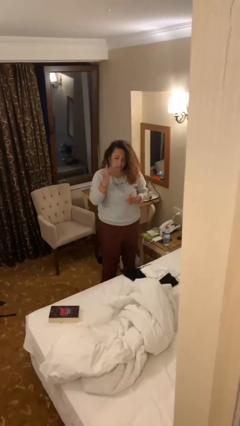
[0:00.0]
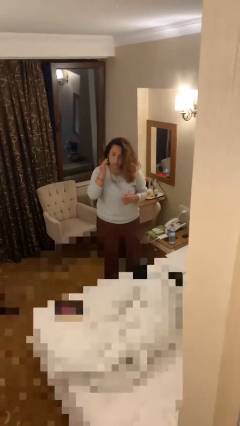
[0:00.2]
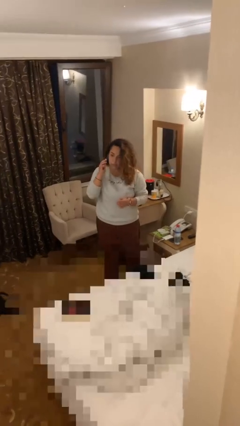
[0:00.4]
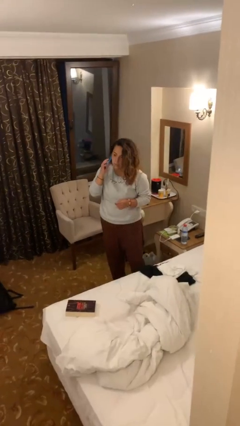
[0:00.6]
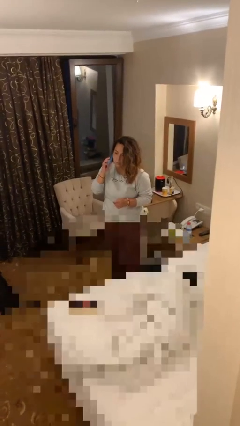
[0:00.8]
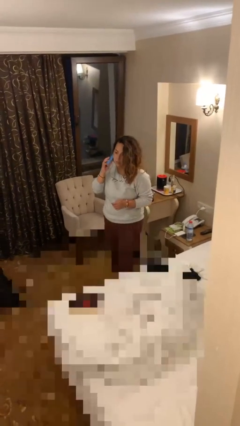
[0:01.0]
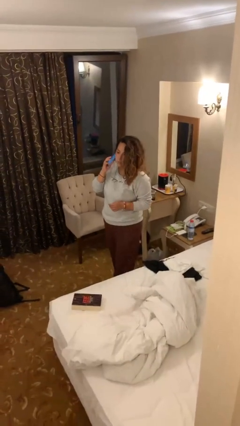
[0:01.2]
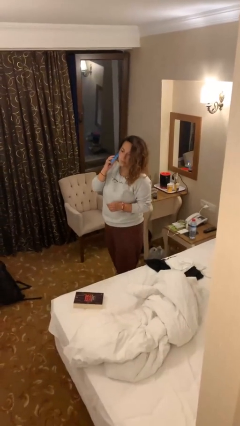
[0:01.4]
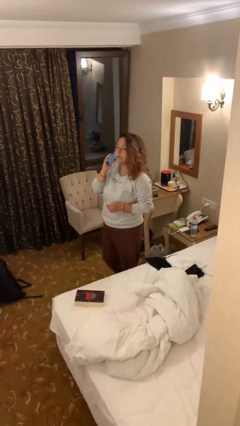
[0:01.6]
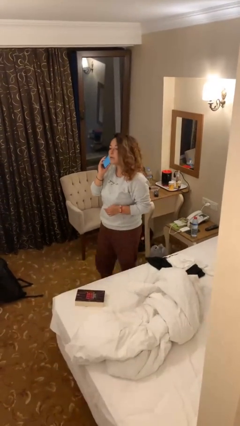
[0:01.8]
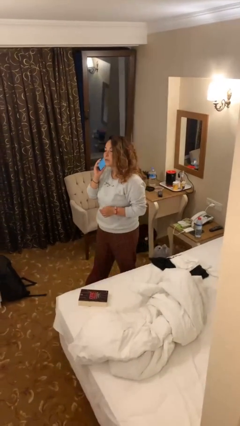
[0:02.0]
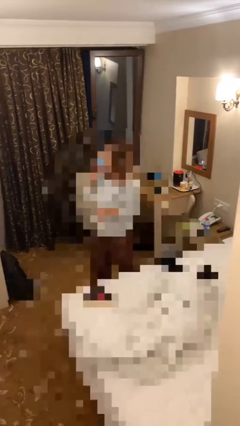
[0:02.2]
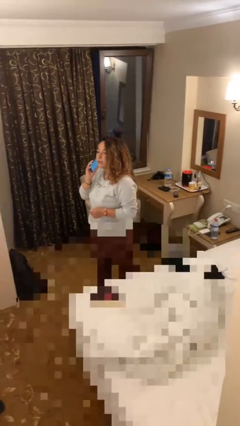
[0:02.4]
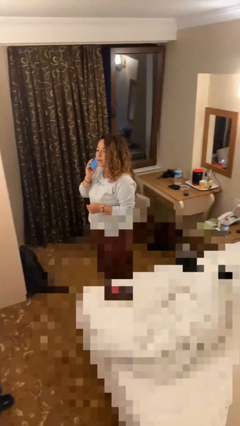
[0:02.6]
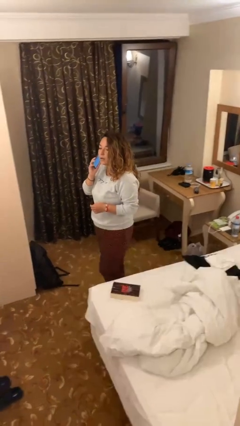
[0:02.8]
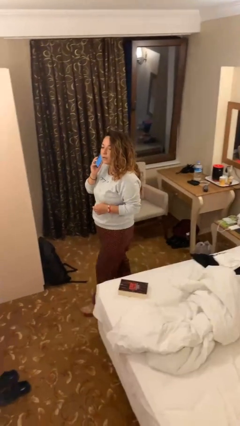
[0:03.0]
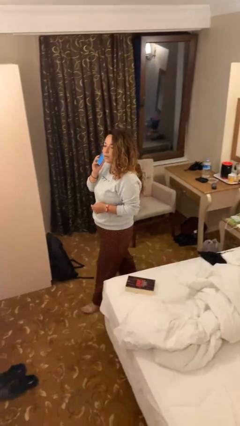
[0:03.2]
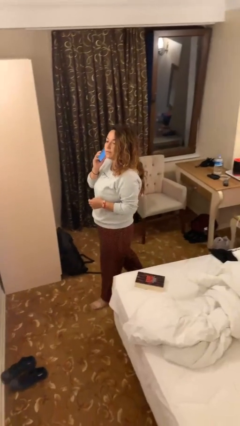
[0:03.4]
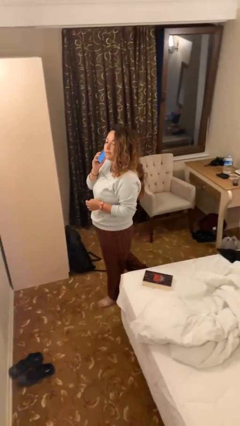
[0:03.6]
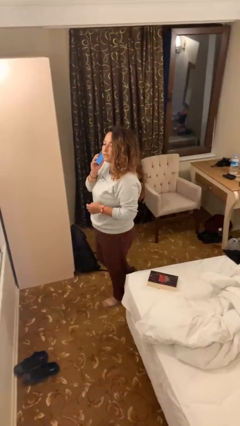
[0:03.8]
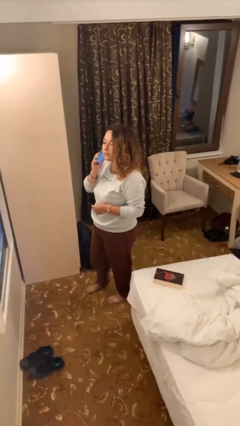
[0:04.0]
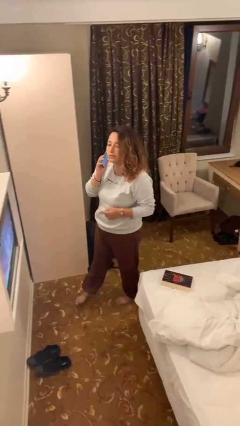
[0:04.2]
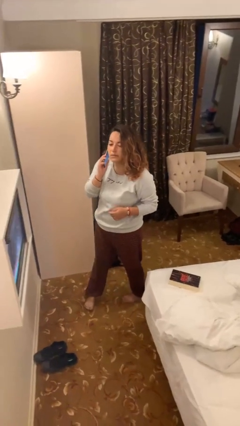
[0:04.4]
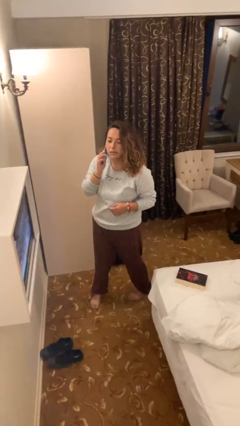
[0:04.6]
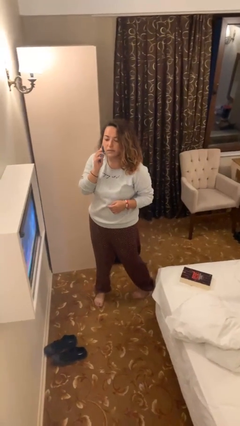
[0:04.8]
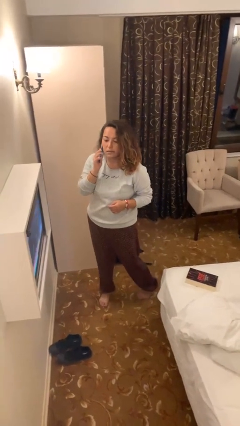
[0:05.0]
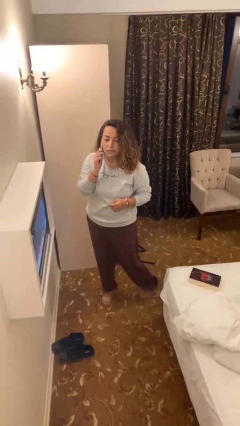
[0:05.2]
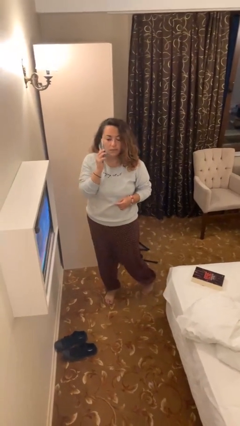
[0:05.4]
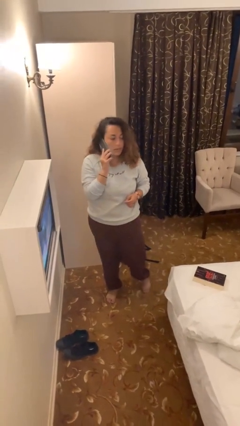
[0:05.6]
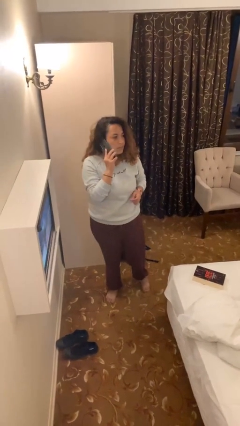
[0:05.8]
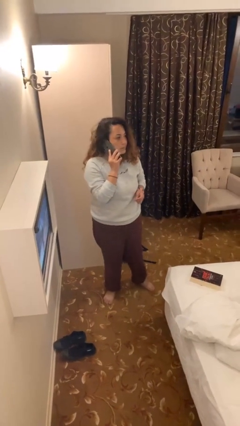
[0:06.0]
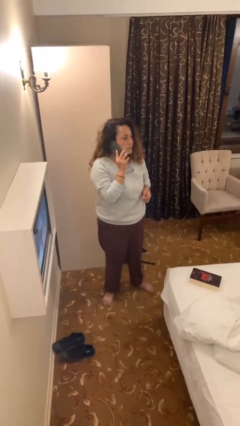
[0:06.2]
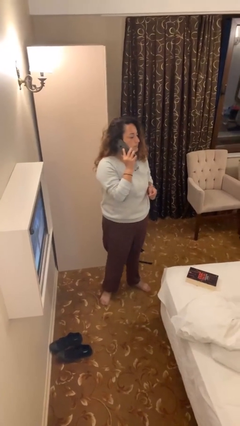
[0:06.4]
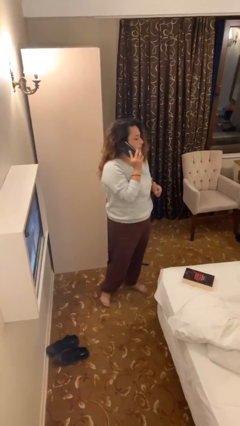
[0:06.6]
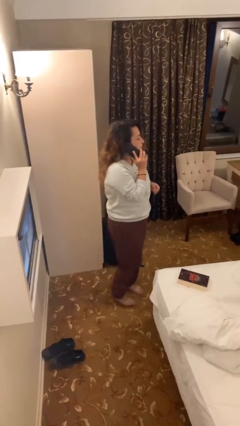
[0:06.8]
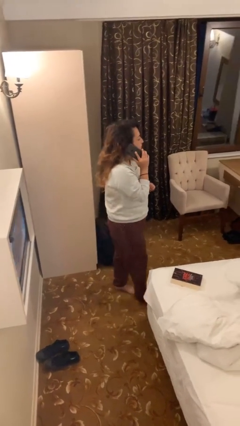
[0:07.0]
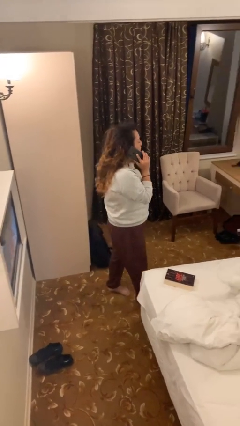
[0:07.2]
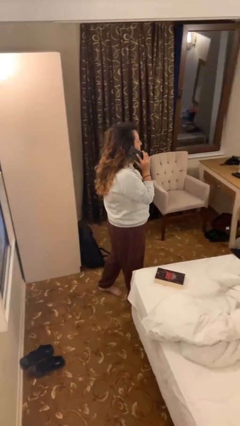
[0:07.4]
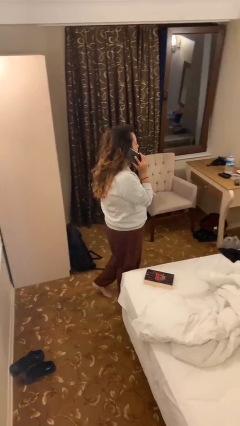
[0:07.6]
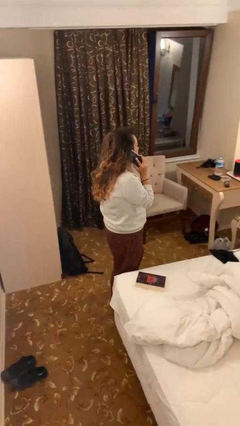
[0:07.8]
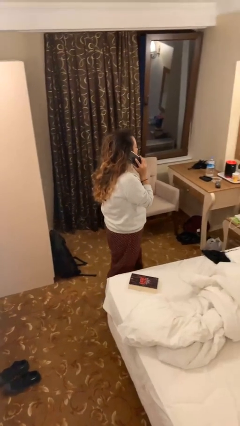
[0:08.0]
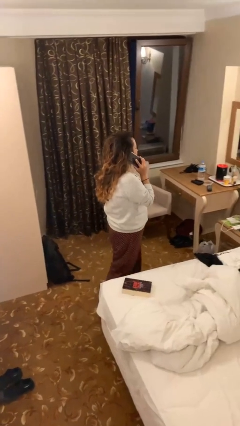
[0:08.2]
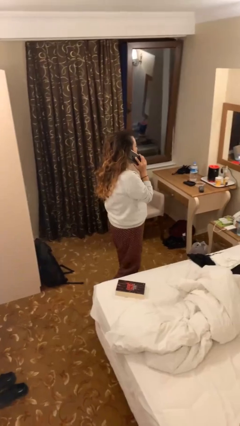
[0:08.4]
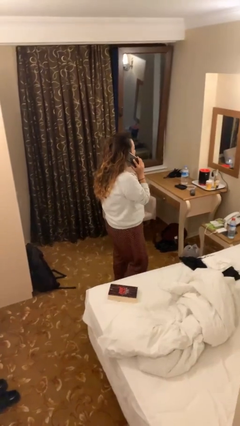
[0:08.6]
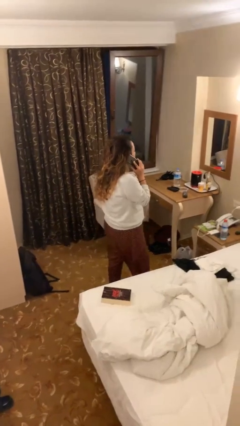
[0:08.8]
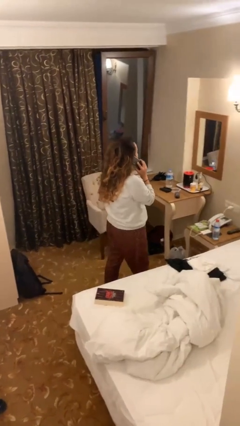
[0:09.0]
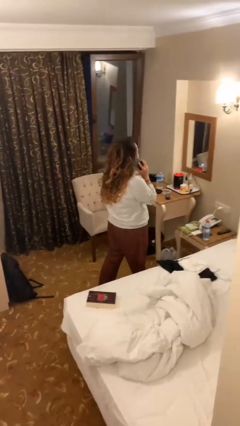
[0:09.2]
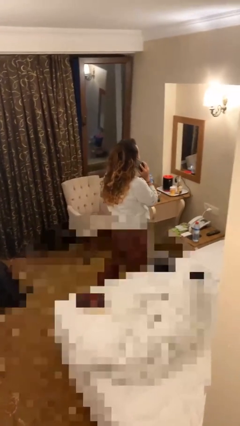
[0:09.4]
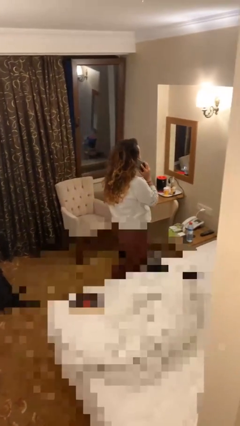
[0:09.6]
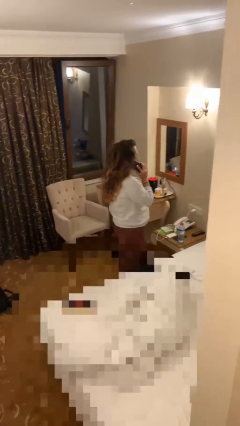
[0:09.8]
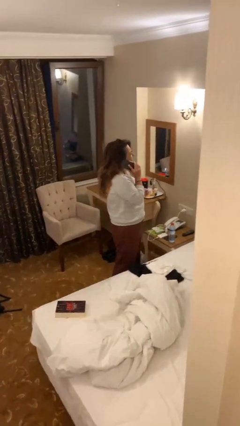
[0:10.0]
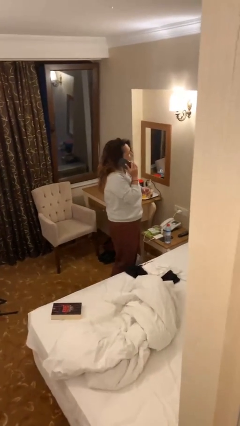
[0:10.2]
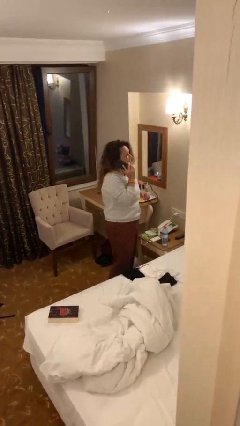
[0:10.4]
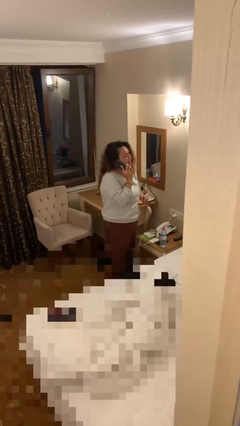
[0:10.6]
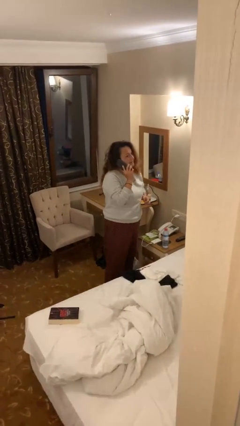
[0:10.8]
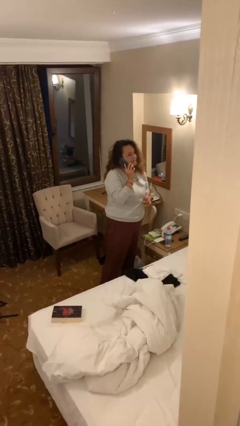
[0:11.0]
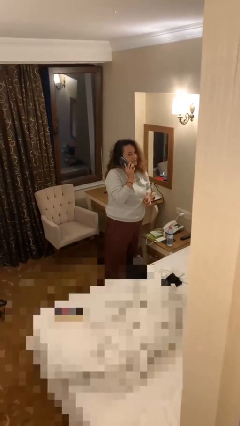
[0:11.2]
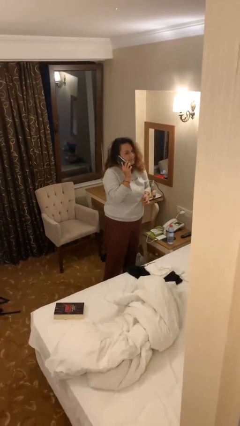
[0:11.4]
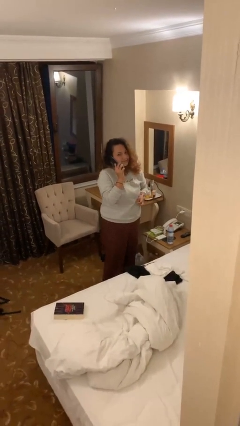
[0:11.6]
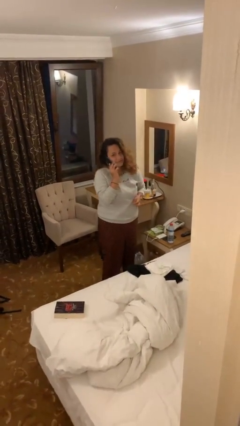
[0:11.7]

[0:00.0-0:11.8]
person talks on phone

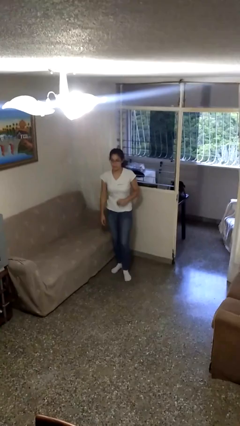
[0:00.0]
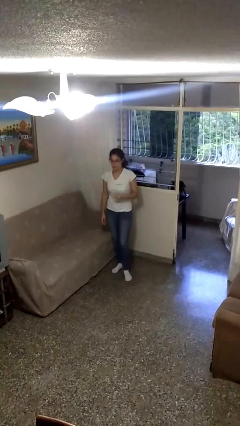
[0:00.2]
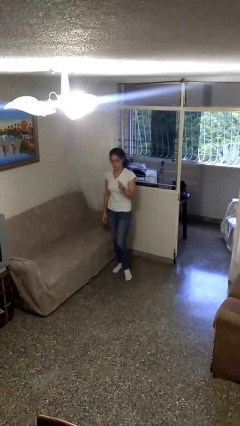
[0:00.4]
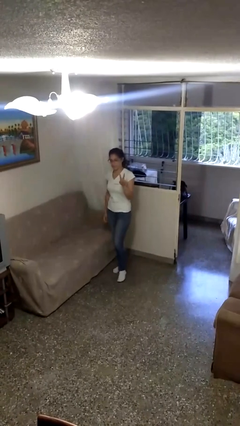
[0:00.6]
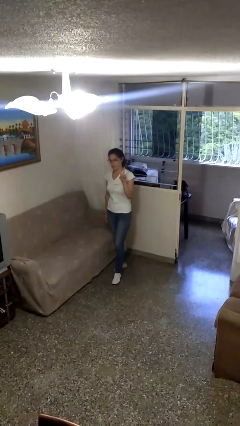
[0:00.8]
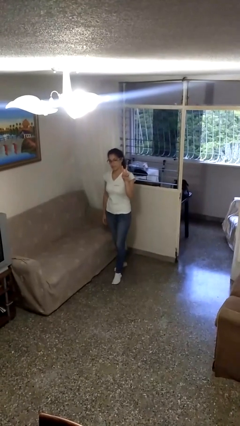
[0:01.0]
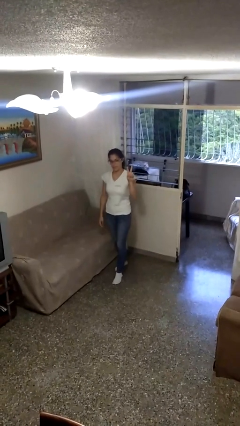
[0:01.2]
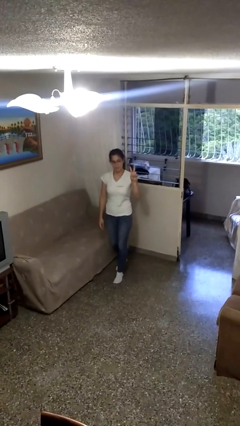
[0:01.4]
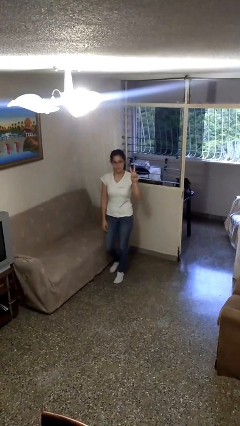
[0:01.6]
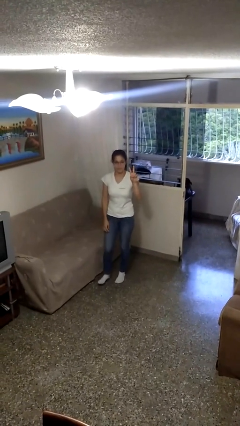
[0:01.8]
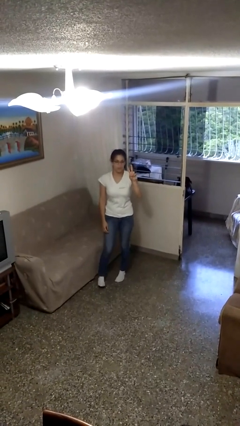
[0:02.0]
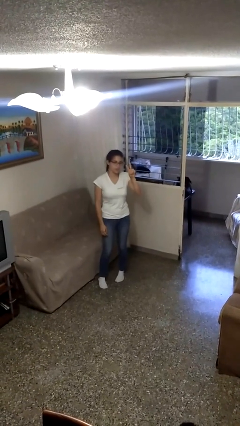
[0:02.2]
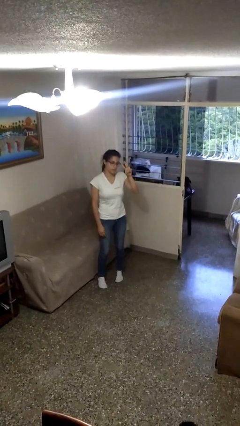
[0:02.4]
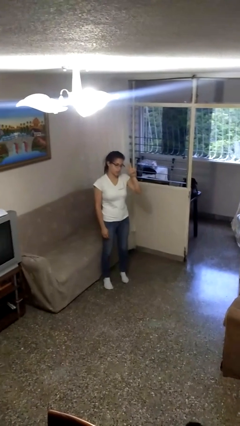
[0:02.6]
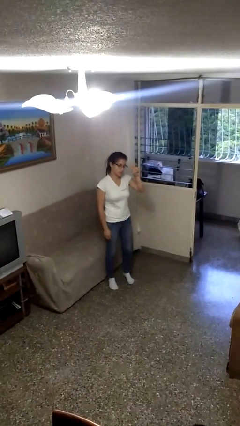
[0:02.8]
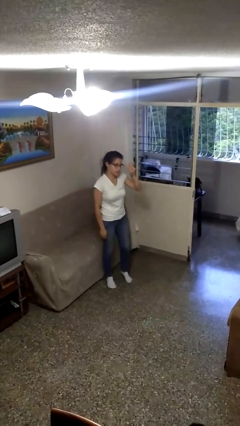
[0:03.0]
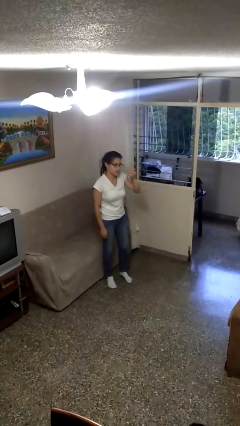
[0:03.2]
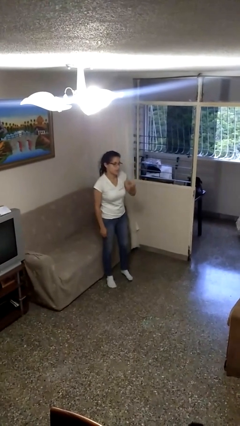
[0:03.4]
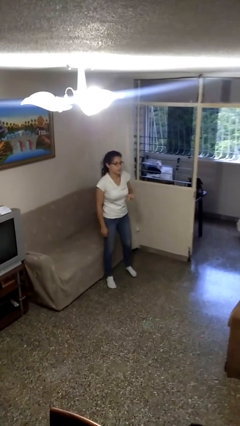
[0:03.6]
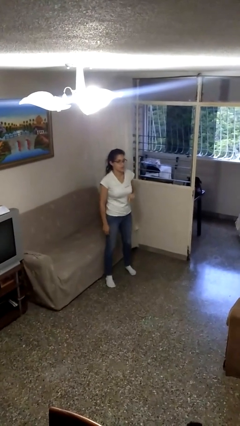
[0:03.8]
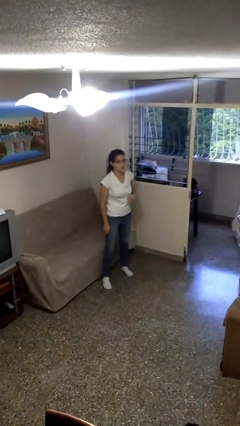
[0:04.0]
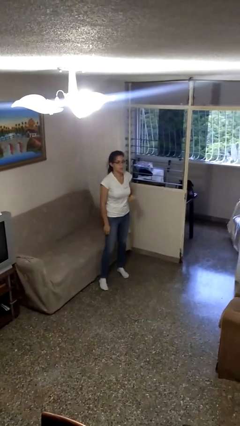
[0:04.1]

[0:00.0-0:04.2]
person gestures peace

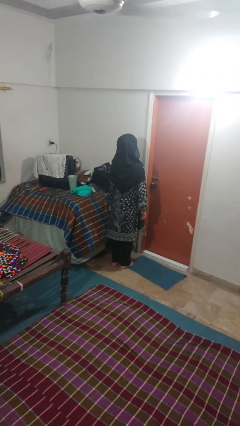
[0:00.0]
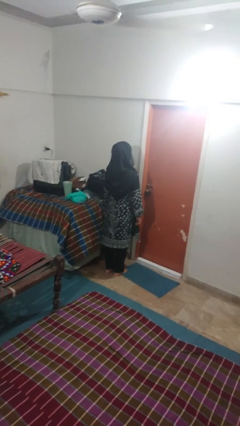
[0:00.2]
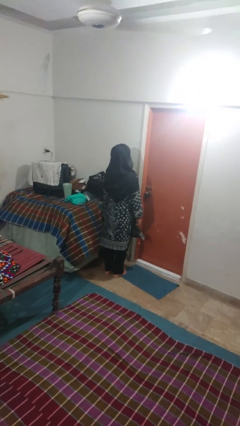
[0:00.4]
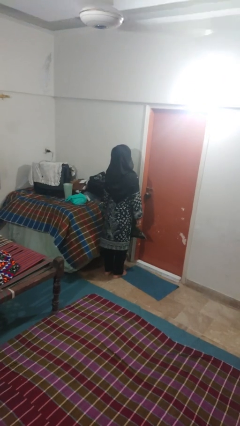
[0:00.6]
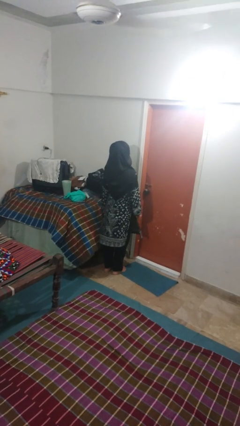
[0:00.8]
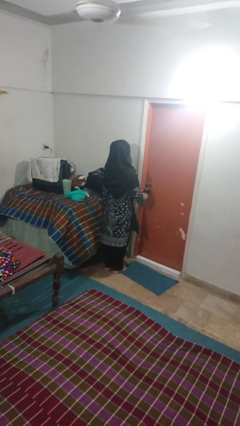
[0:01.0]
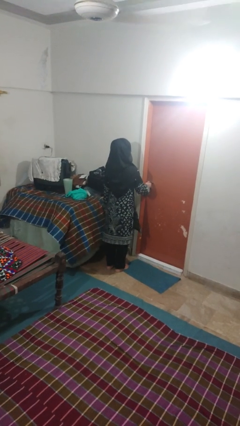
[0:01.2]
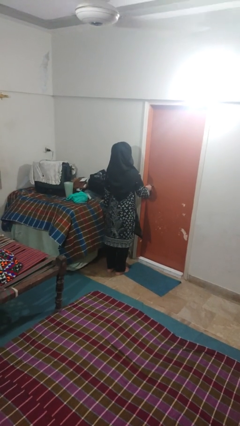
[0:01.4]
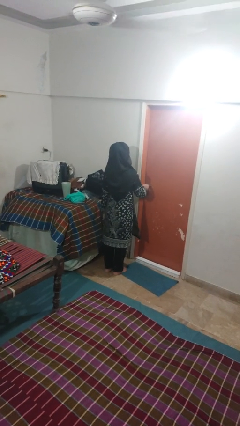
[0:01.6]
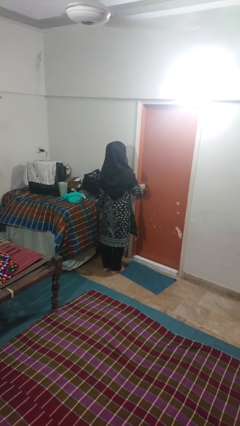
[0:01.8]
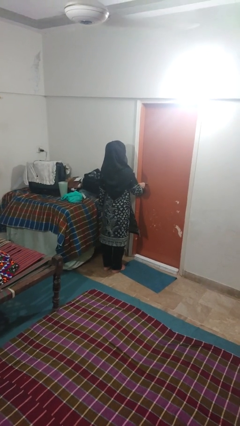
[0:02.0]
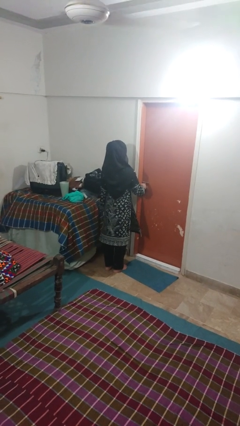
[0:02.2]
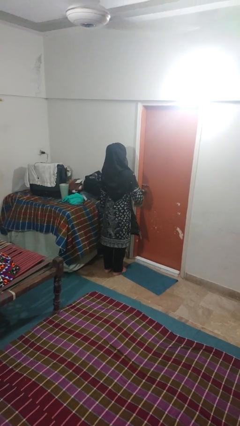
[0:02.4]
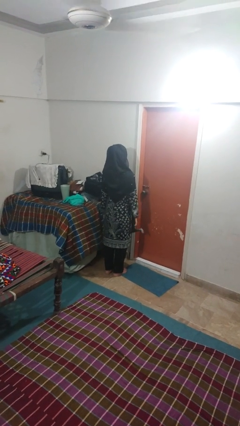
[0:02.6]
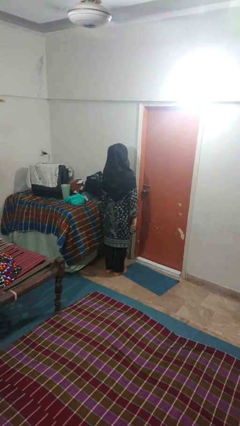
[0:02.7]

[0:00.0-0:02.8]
person unlocks door with keys
